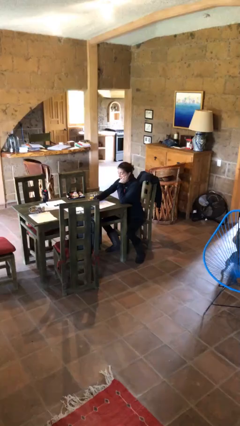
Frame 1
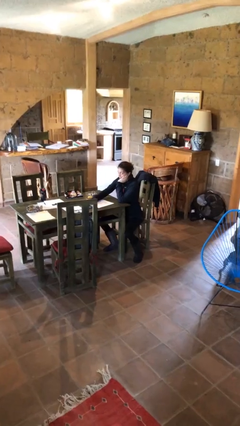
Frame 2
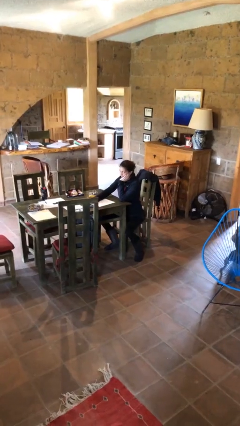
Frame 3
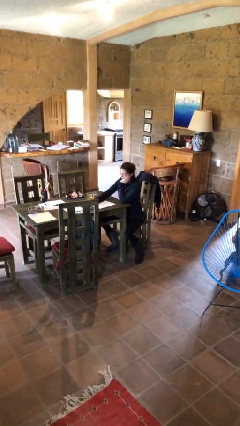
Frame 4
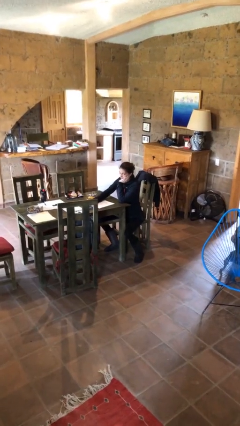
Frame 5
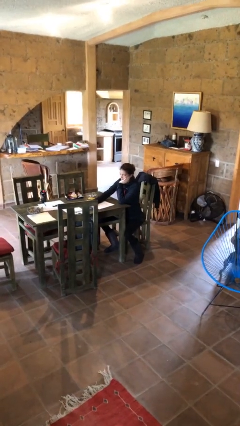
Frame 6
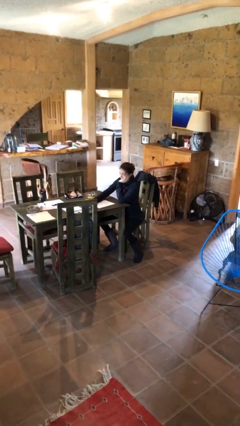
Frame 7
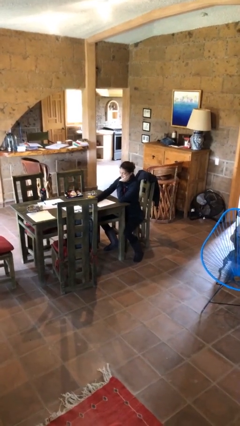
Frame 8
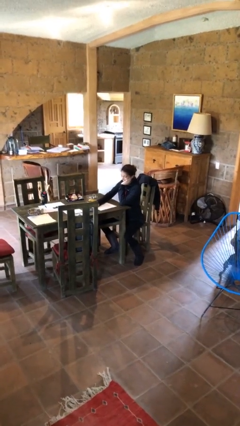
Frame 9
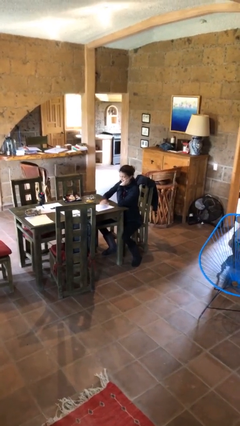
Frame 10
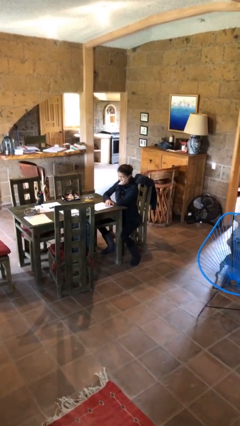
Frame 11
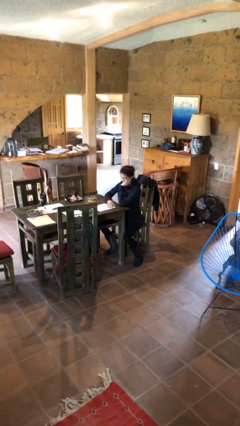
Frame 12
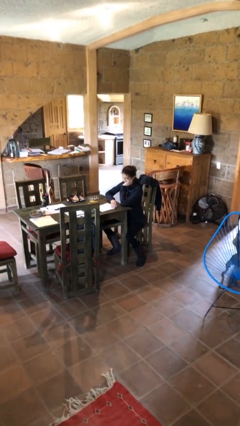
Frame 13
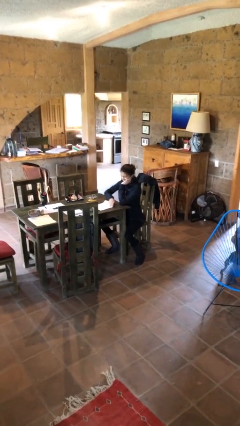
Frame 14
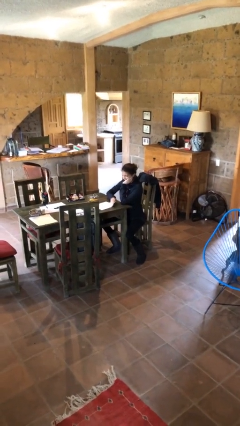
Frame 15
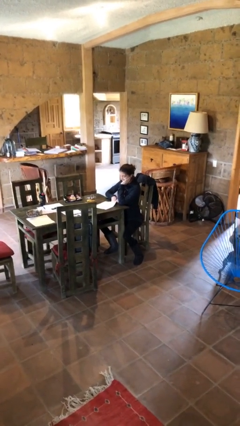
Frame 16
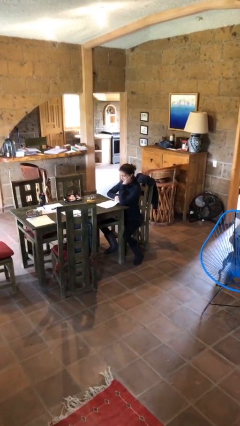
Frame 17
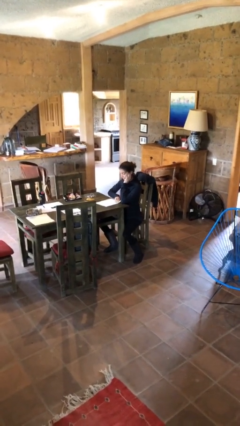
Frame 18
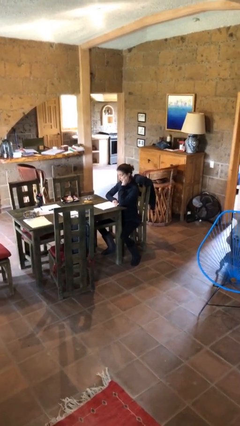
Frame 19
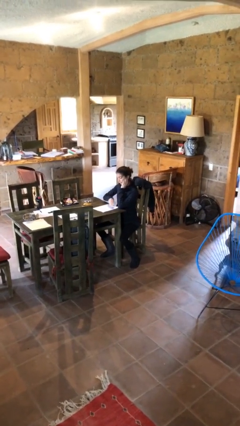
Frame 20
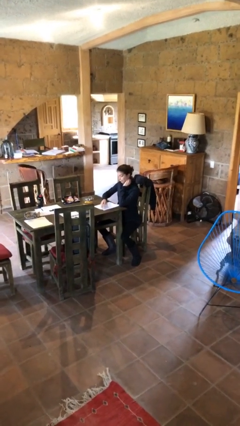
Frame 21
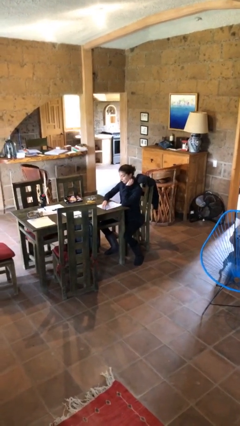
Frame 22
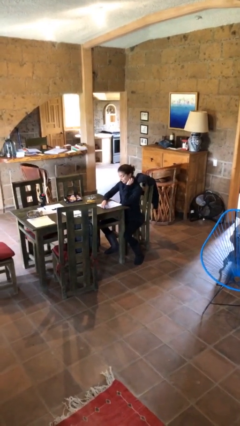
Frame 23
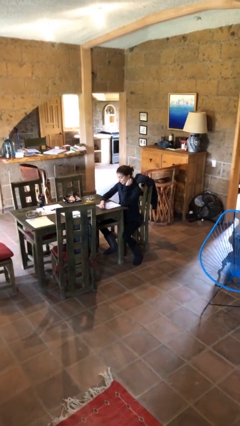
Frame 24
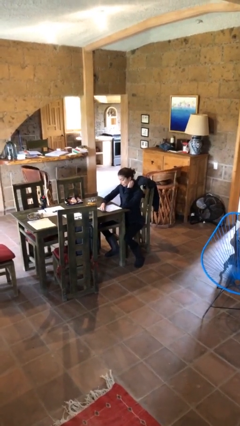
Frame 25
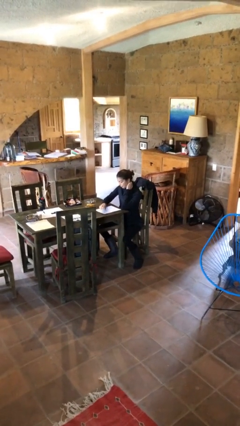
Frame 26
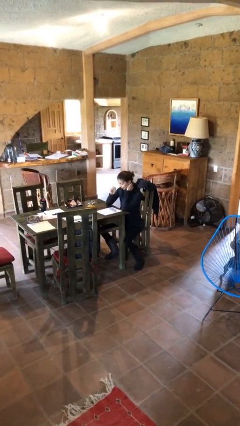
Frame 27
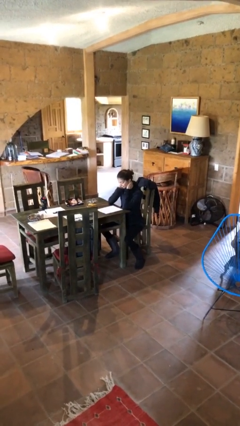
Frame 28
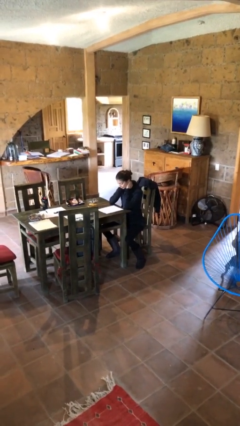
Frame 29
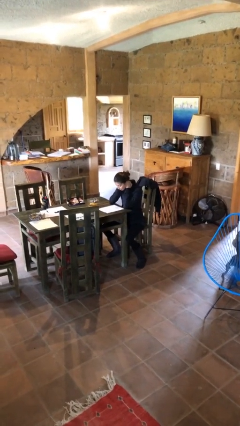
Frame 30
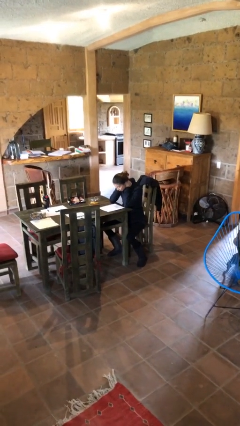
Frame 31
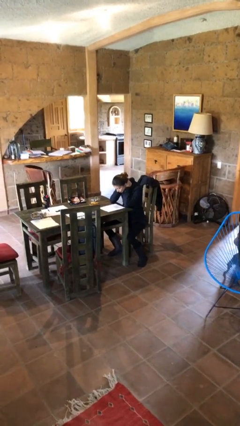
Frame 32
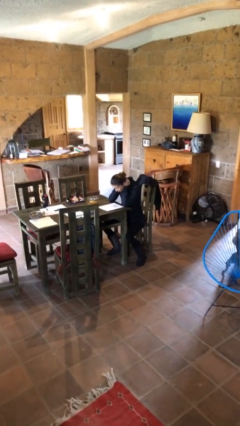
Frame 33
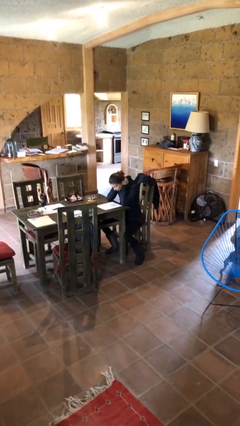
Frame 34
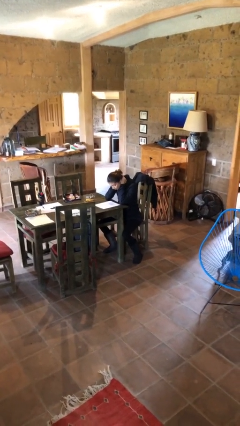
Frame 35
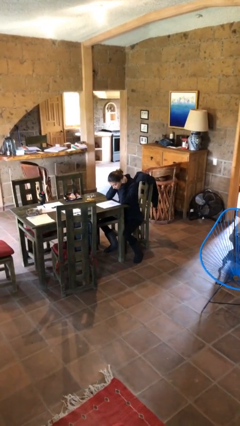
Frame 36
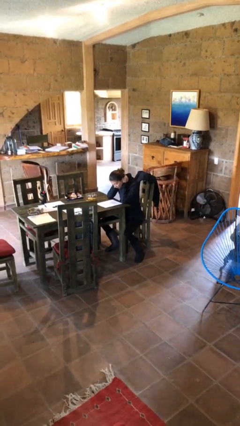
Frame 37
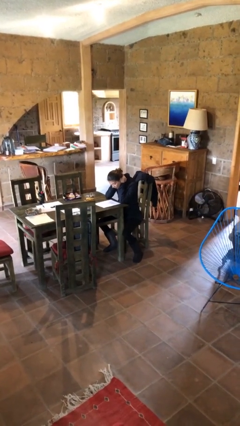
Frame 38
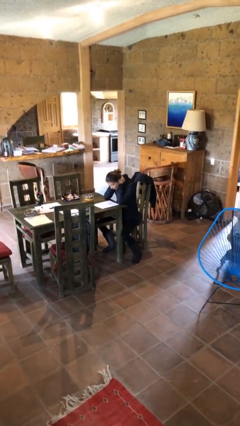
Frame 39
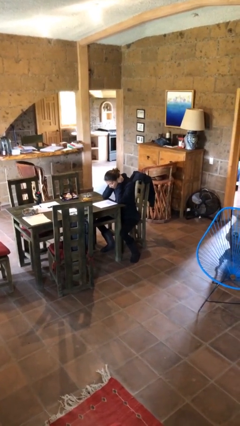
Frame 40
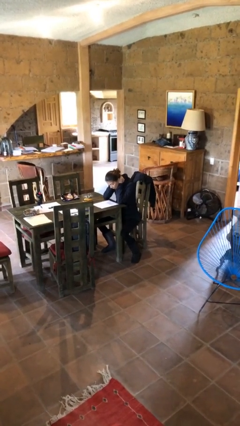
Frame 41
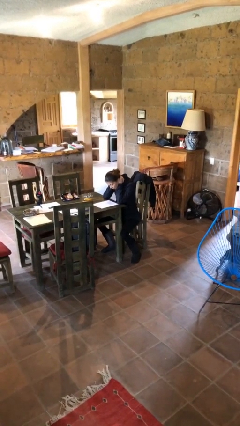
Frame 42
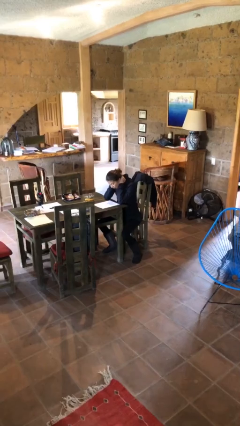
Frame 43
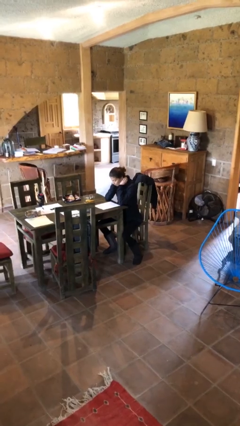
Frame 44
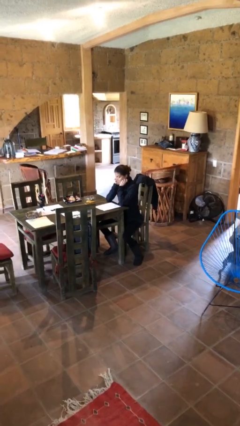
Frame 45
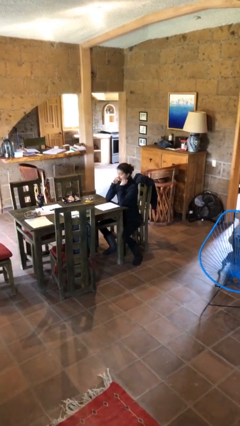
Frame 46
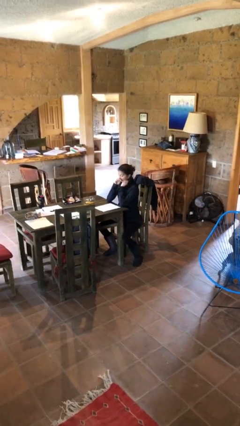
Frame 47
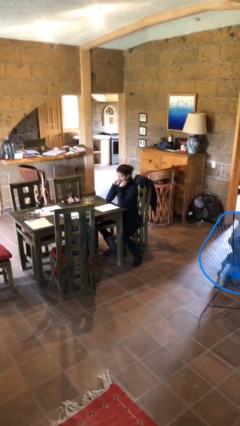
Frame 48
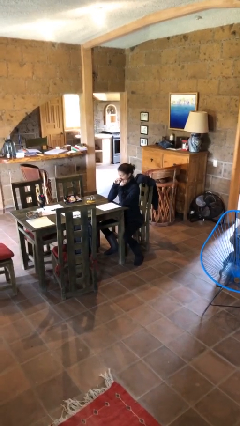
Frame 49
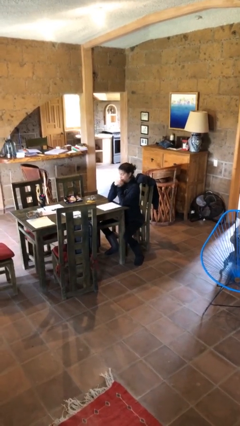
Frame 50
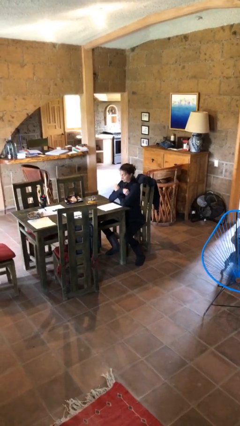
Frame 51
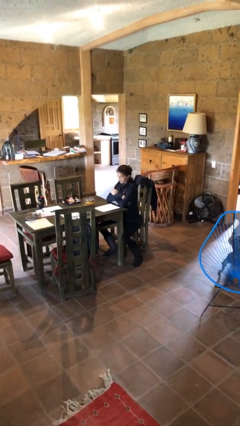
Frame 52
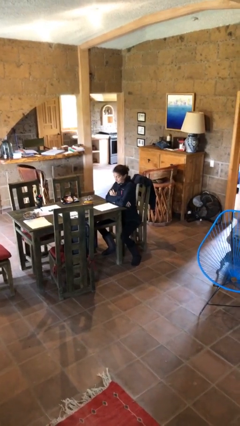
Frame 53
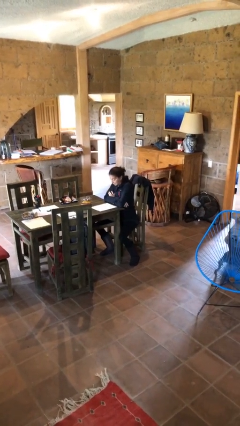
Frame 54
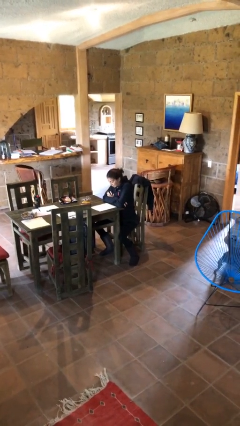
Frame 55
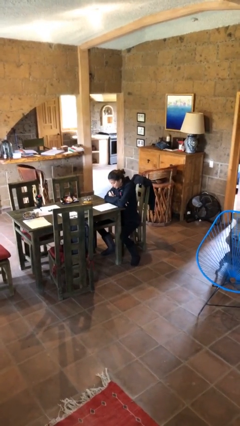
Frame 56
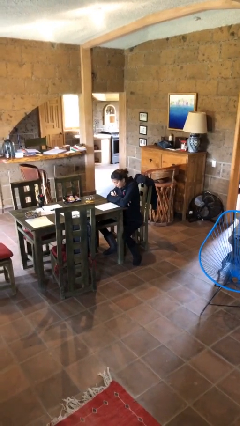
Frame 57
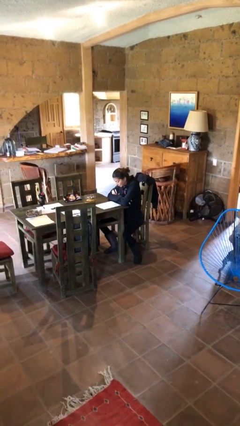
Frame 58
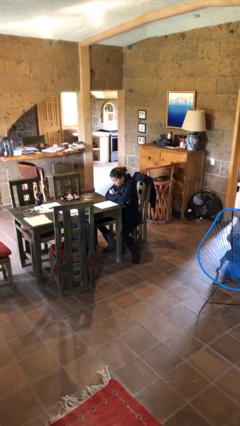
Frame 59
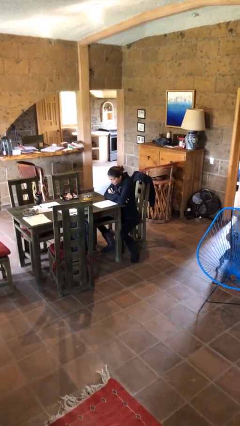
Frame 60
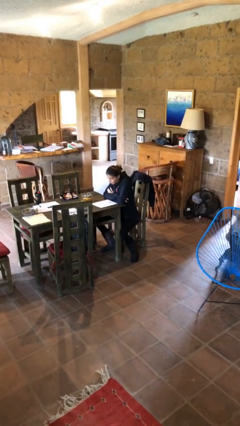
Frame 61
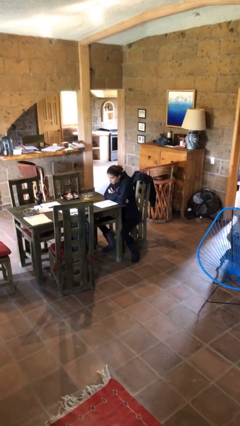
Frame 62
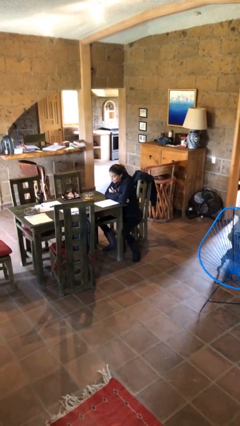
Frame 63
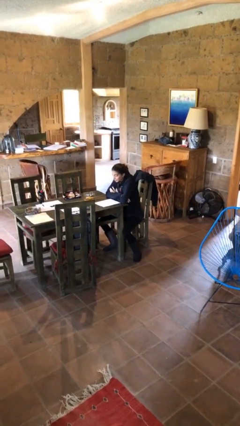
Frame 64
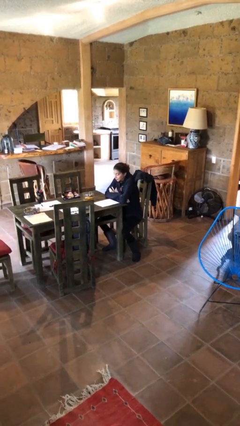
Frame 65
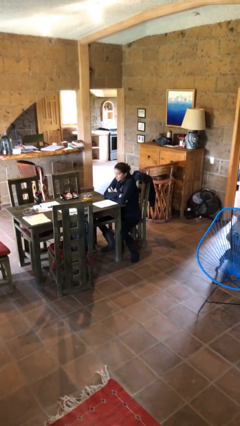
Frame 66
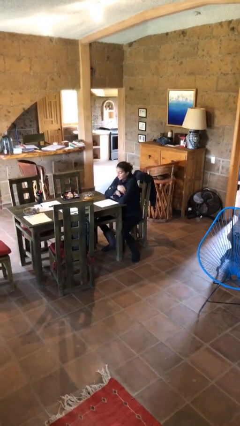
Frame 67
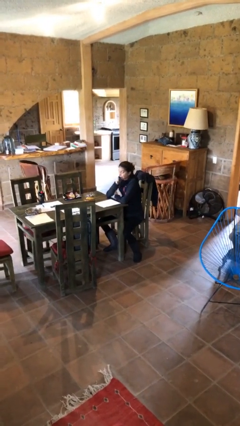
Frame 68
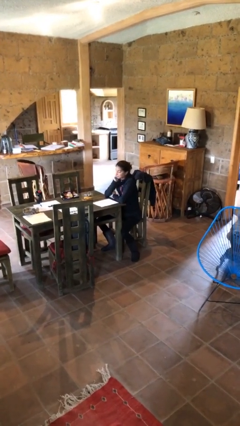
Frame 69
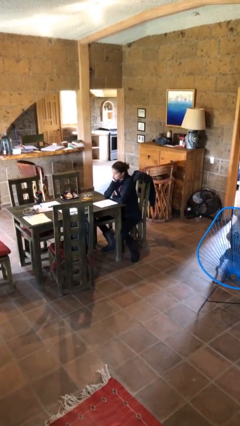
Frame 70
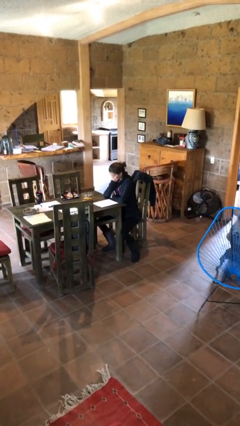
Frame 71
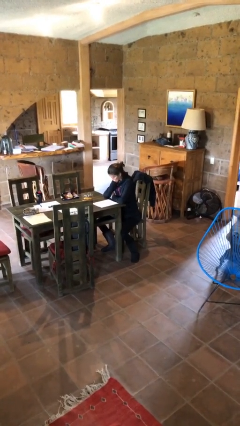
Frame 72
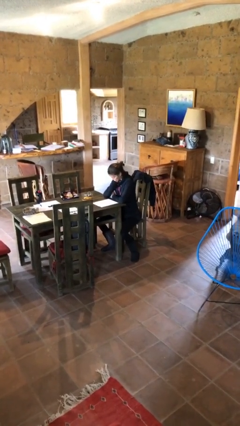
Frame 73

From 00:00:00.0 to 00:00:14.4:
person reads document

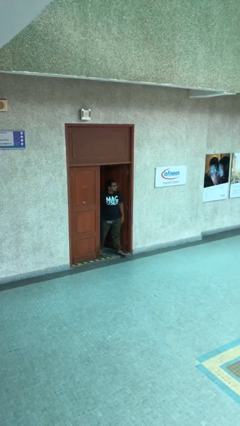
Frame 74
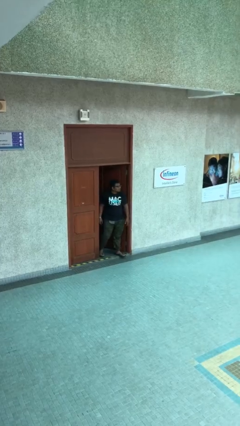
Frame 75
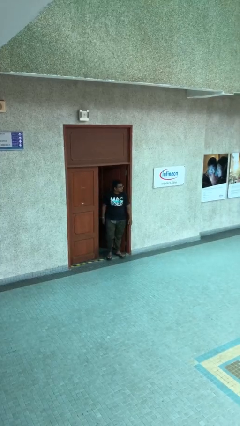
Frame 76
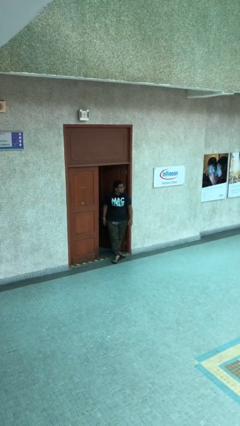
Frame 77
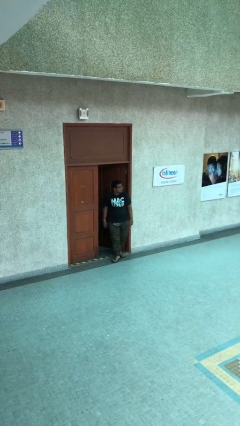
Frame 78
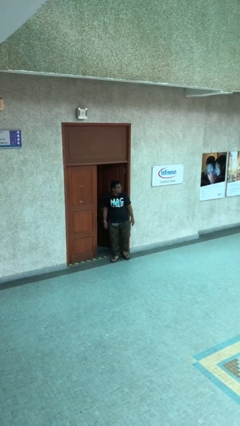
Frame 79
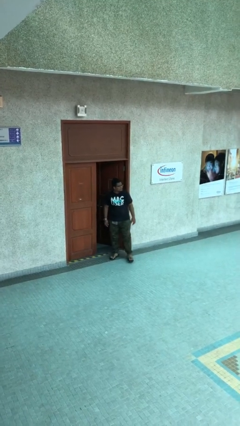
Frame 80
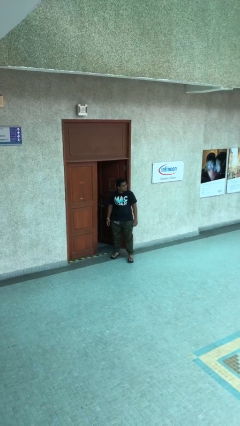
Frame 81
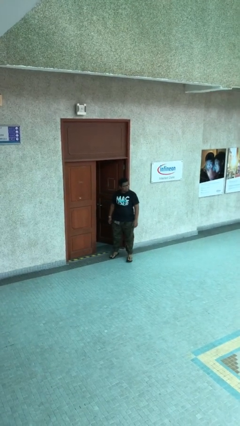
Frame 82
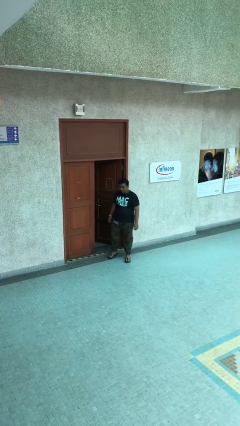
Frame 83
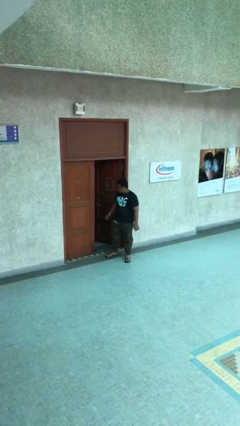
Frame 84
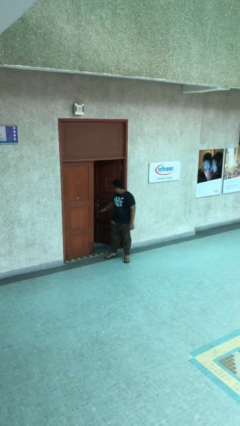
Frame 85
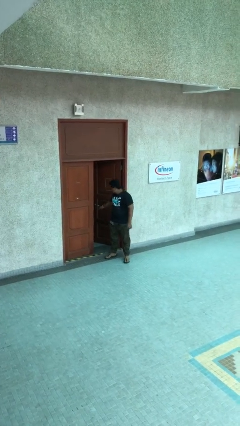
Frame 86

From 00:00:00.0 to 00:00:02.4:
person enters scene through structure

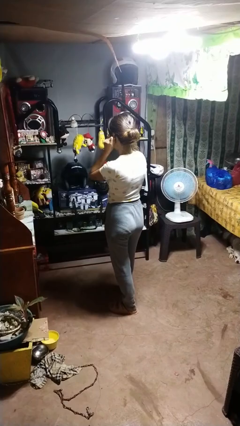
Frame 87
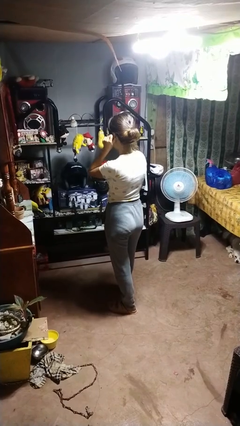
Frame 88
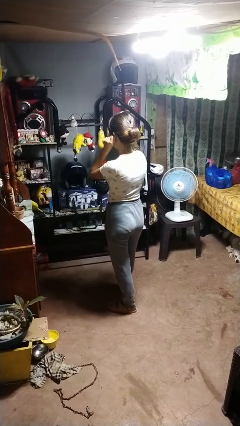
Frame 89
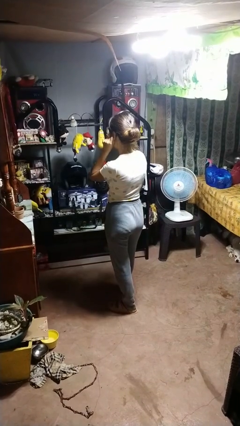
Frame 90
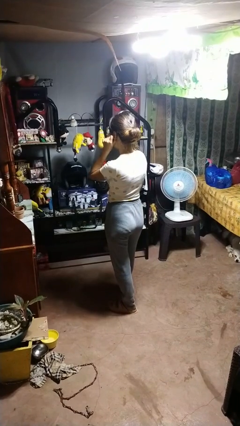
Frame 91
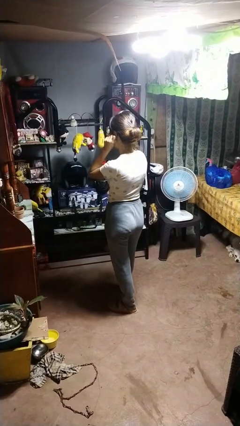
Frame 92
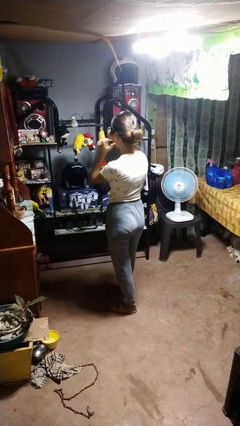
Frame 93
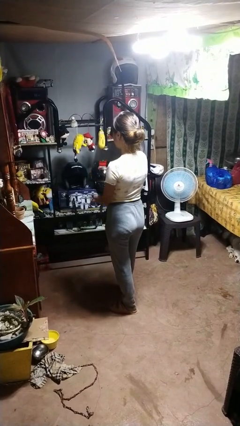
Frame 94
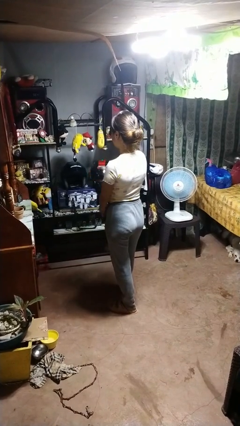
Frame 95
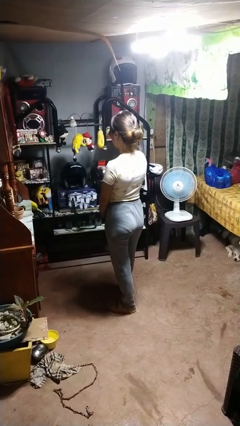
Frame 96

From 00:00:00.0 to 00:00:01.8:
person touches earlobe
